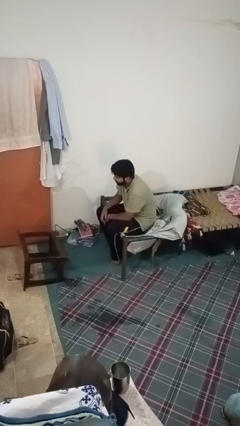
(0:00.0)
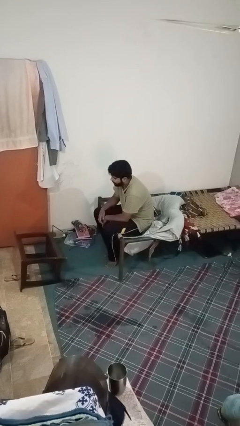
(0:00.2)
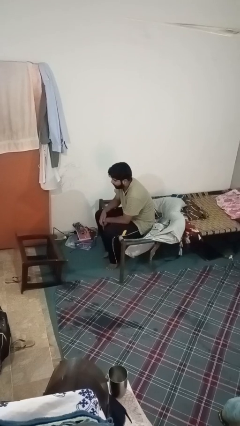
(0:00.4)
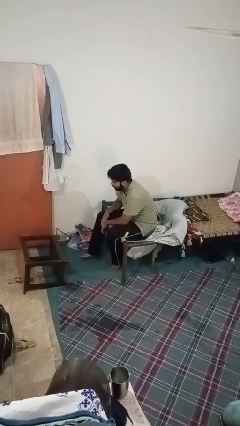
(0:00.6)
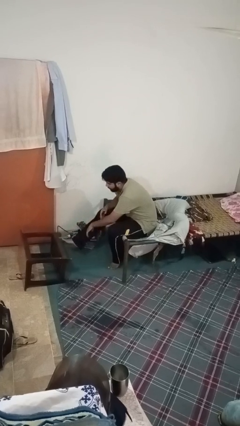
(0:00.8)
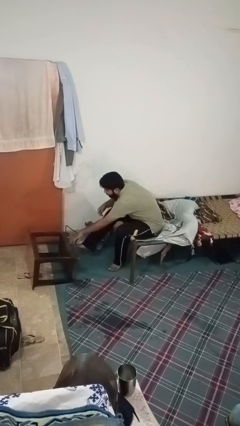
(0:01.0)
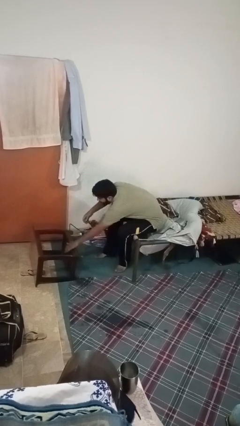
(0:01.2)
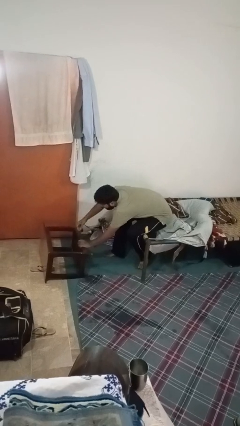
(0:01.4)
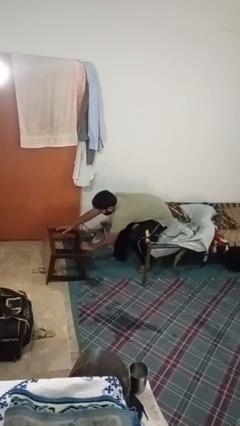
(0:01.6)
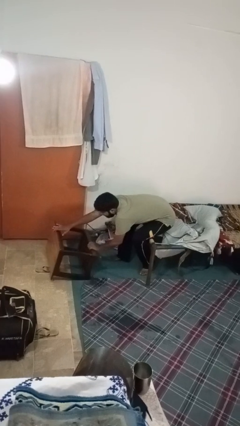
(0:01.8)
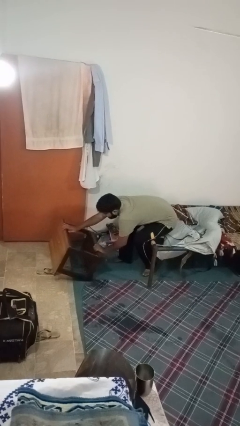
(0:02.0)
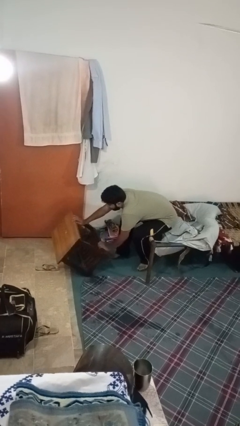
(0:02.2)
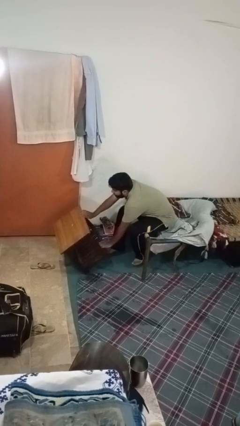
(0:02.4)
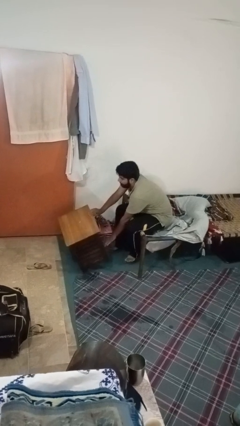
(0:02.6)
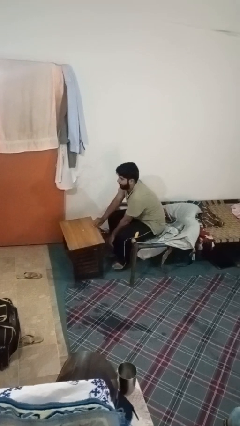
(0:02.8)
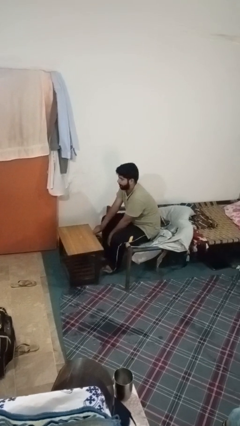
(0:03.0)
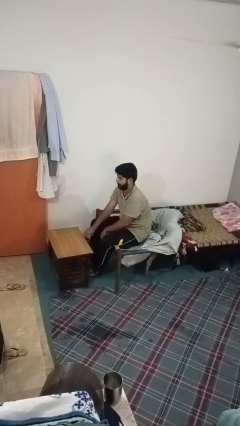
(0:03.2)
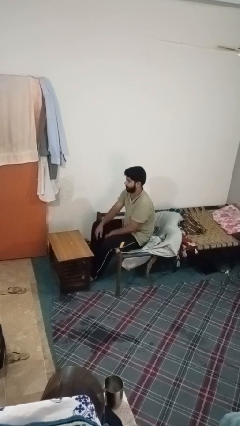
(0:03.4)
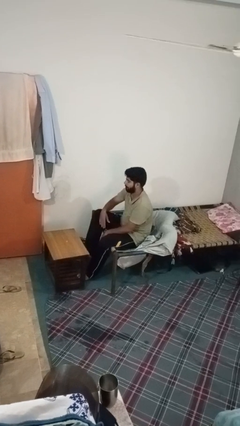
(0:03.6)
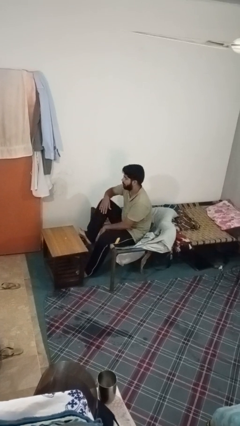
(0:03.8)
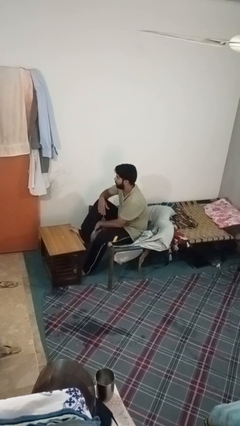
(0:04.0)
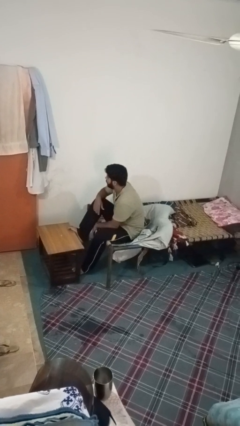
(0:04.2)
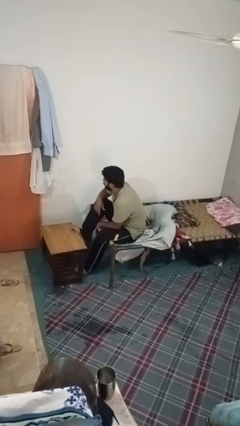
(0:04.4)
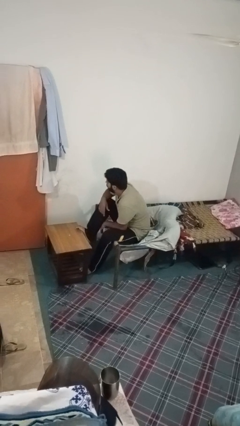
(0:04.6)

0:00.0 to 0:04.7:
person sets upright furniture

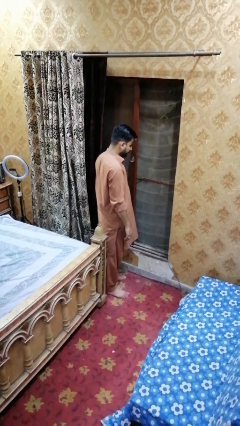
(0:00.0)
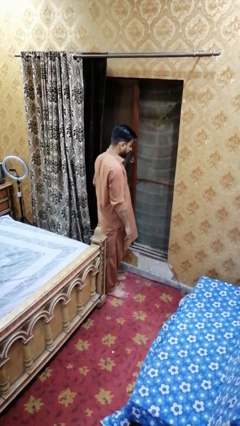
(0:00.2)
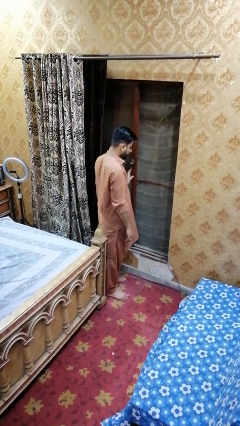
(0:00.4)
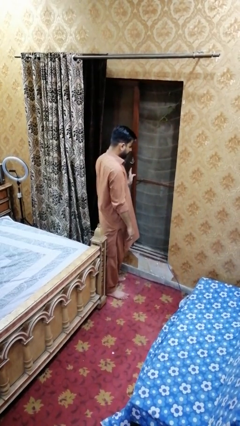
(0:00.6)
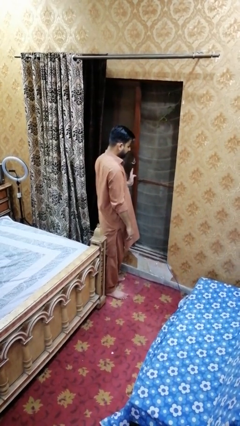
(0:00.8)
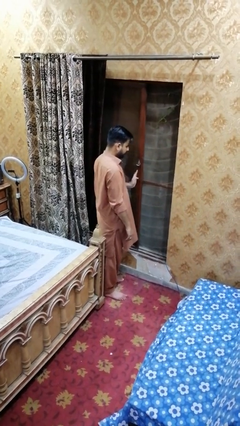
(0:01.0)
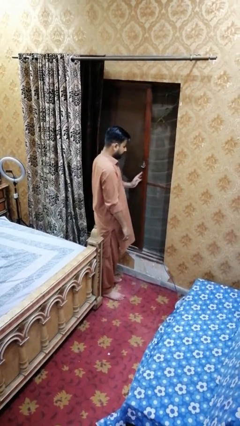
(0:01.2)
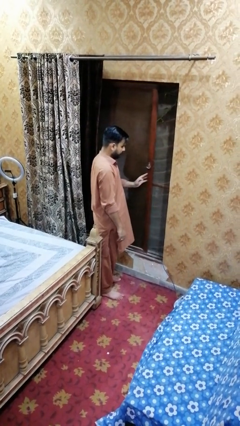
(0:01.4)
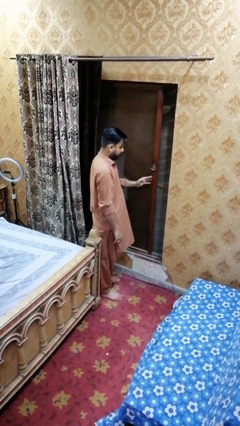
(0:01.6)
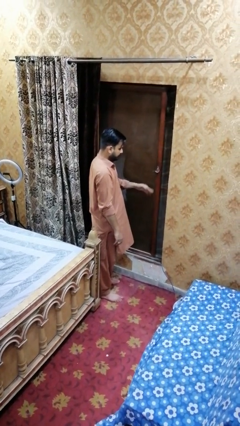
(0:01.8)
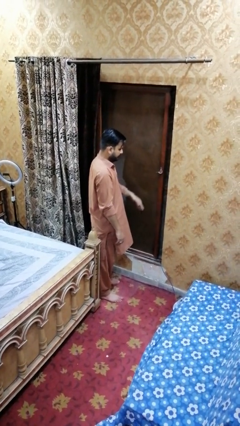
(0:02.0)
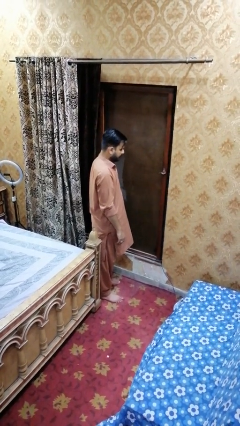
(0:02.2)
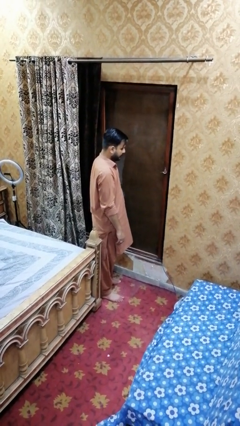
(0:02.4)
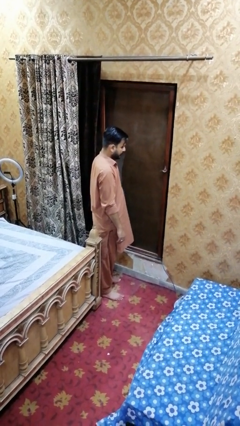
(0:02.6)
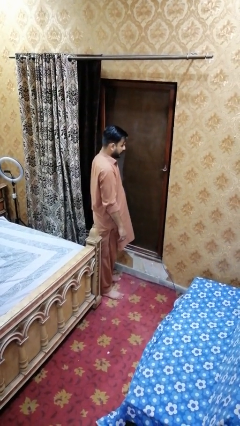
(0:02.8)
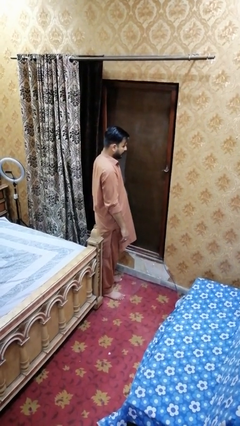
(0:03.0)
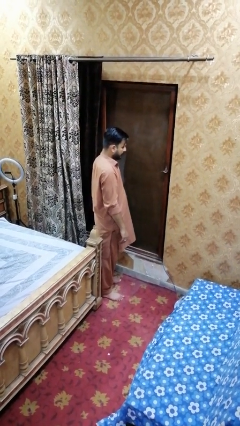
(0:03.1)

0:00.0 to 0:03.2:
person closes home window

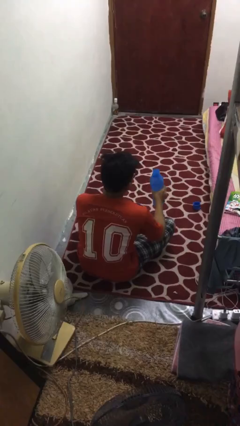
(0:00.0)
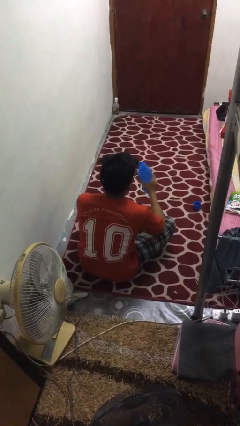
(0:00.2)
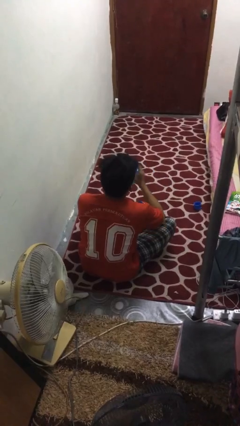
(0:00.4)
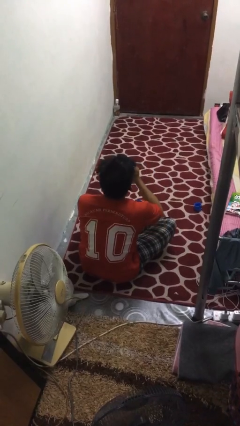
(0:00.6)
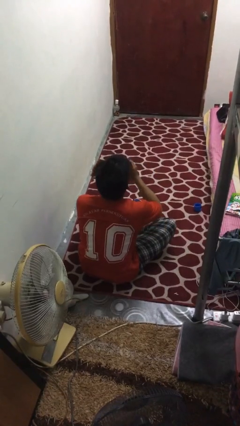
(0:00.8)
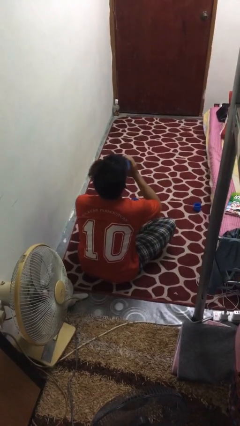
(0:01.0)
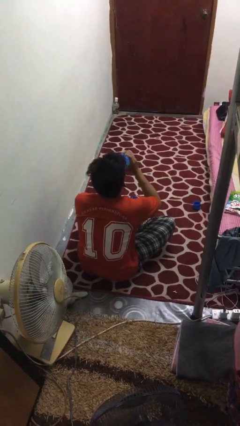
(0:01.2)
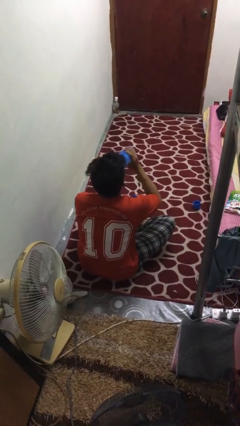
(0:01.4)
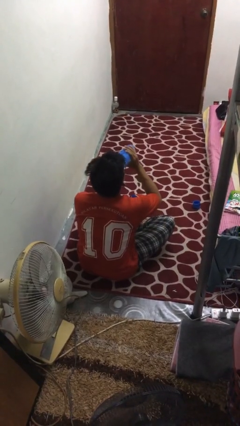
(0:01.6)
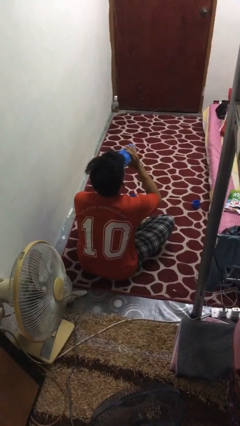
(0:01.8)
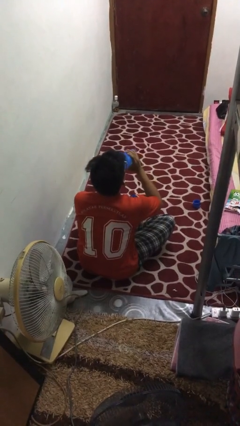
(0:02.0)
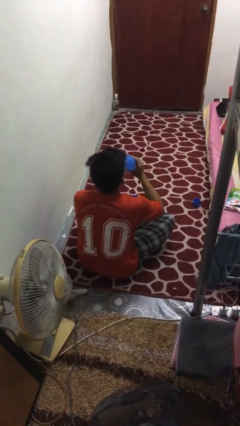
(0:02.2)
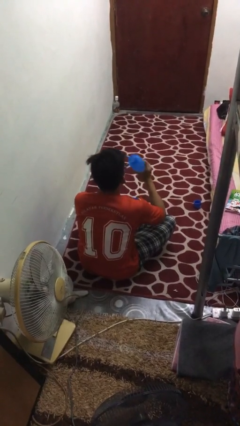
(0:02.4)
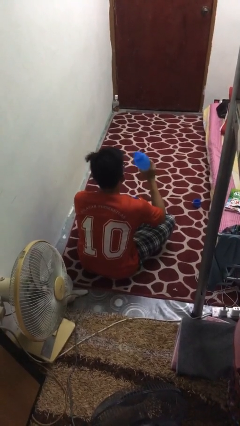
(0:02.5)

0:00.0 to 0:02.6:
person drinks from bottle

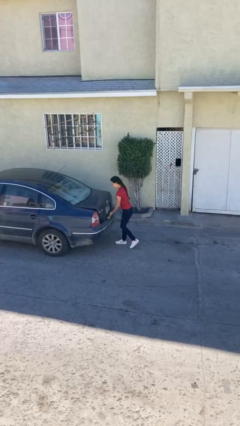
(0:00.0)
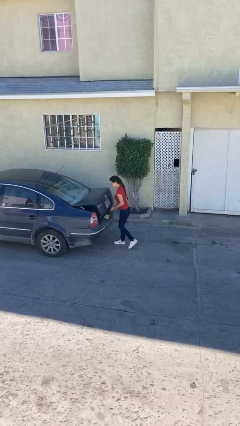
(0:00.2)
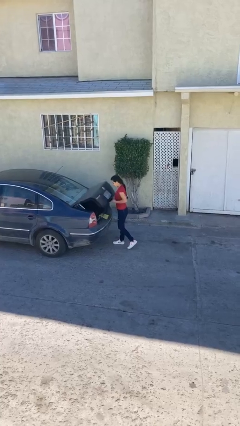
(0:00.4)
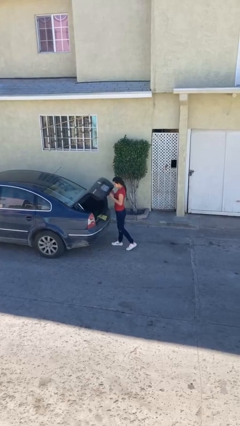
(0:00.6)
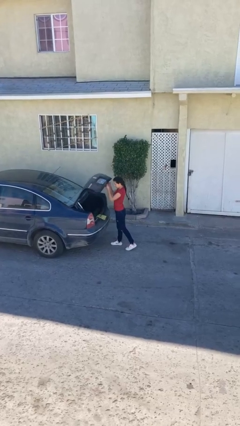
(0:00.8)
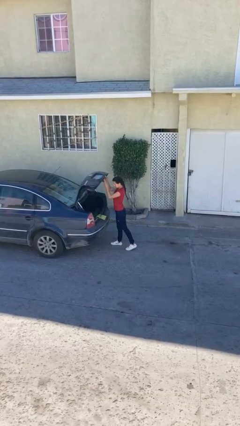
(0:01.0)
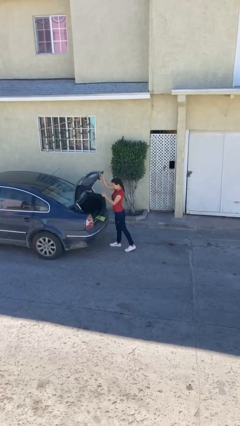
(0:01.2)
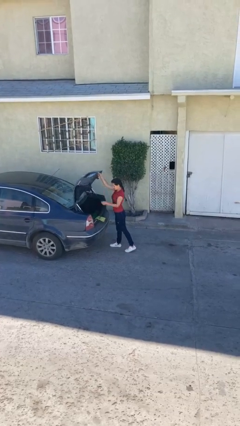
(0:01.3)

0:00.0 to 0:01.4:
person opens car trunk

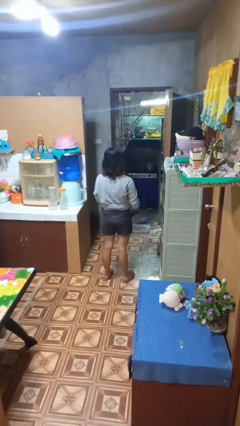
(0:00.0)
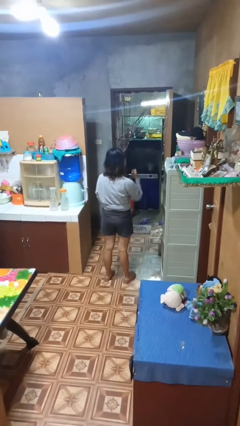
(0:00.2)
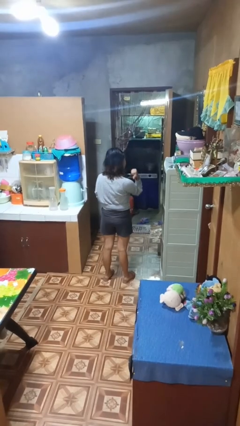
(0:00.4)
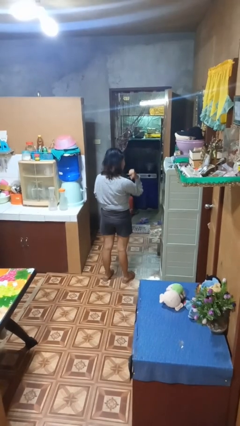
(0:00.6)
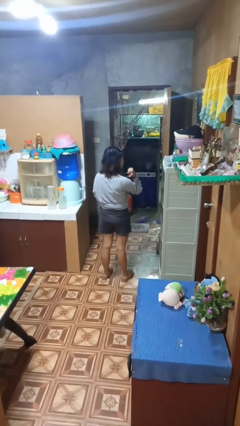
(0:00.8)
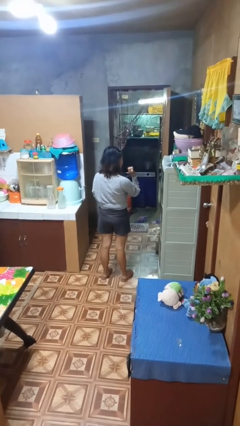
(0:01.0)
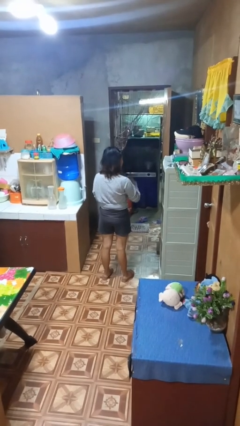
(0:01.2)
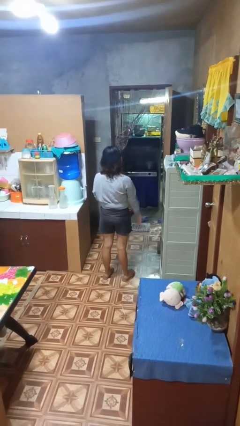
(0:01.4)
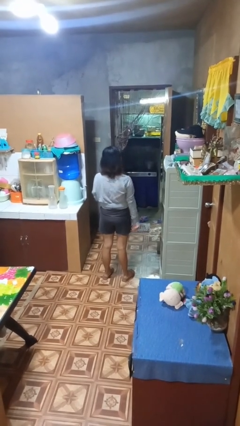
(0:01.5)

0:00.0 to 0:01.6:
person gestures behind me

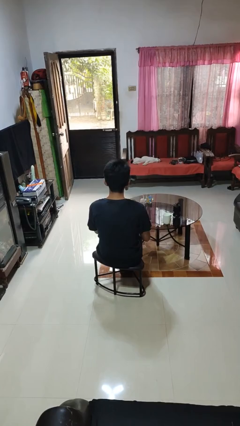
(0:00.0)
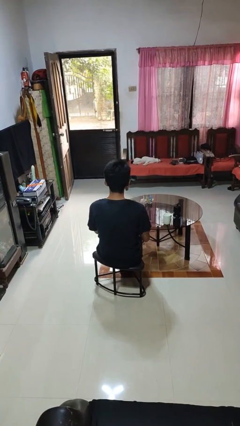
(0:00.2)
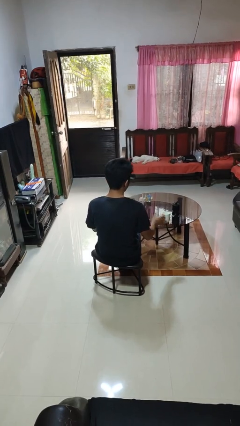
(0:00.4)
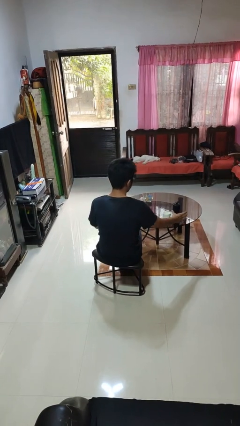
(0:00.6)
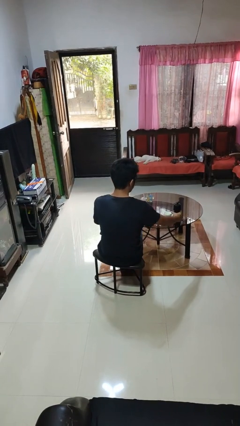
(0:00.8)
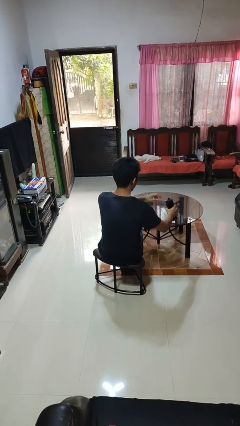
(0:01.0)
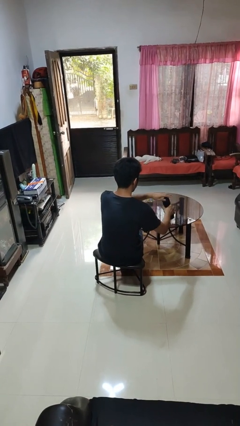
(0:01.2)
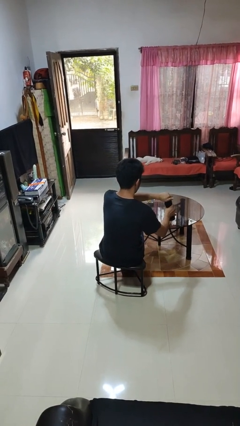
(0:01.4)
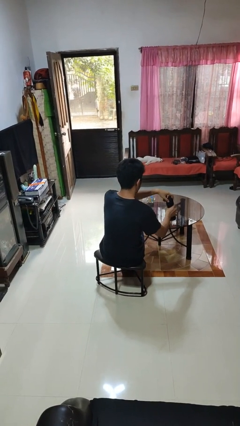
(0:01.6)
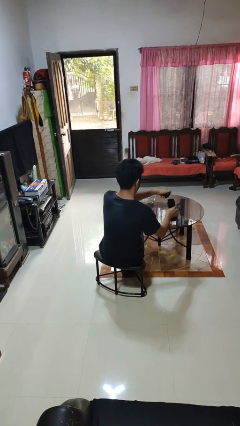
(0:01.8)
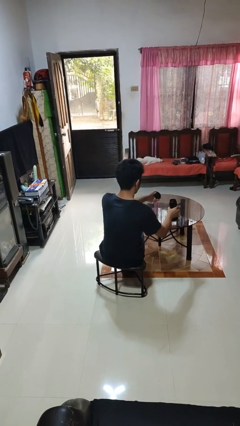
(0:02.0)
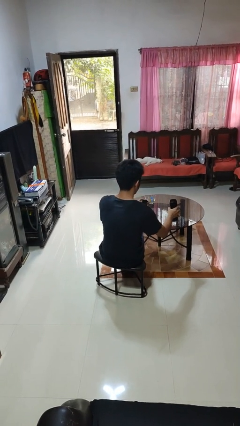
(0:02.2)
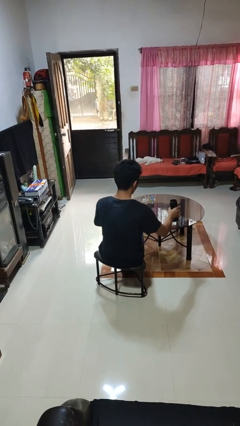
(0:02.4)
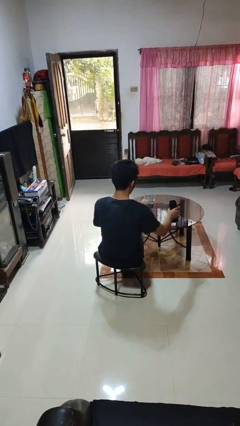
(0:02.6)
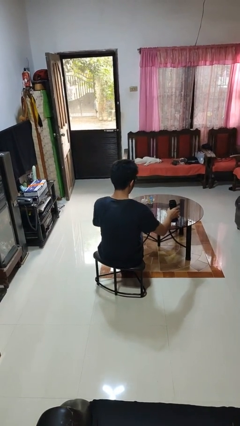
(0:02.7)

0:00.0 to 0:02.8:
person unscrews lid from bottle

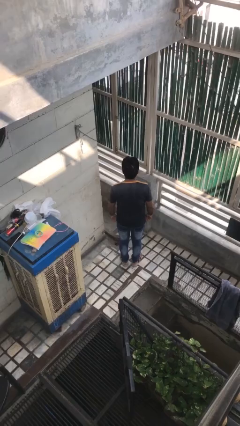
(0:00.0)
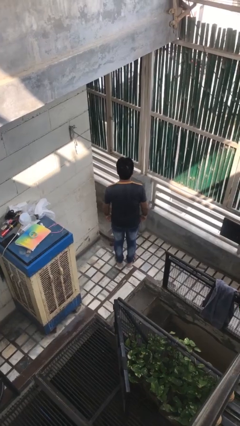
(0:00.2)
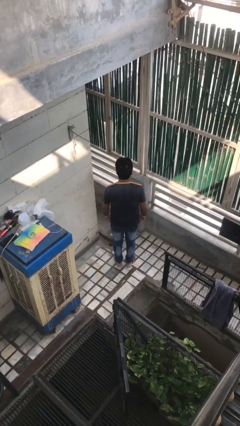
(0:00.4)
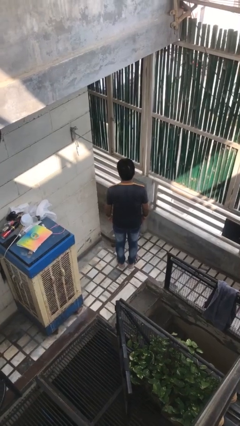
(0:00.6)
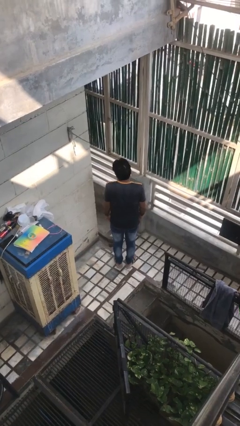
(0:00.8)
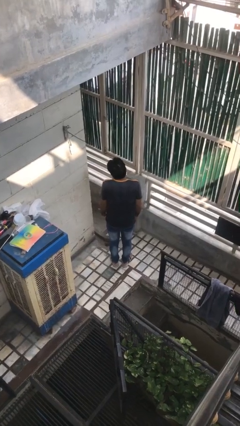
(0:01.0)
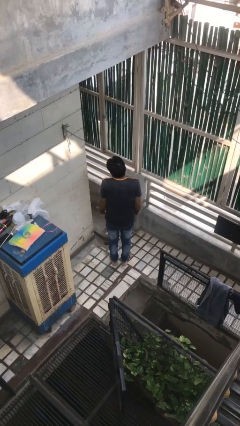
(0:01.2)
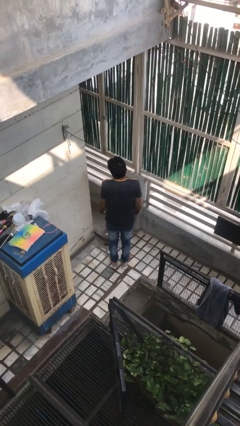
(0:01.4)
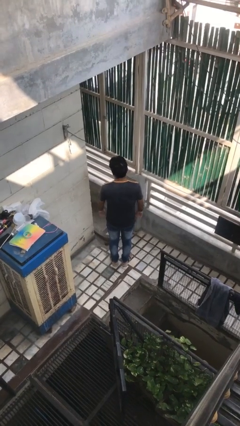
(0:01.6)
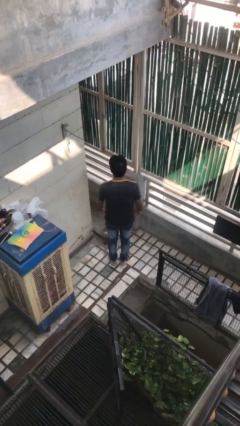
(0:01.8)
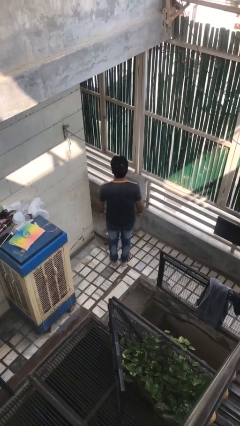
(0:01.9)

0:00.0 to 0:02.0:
person shrugs
